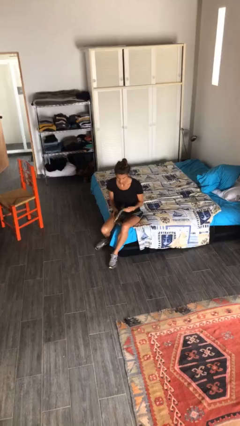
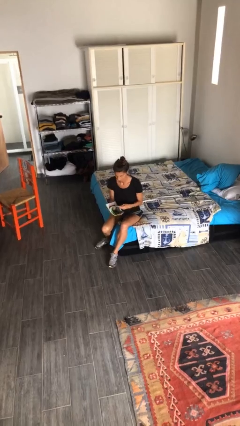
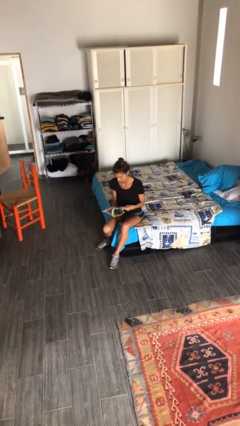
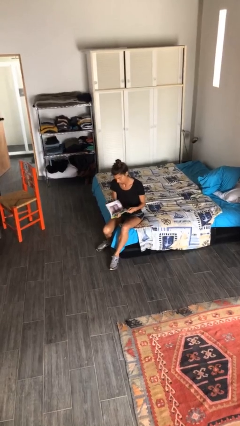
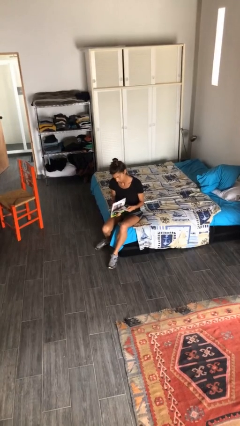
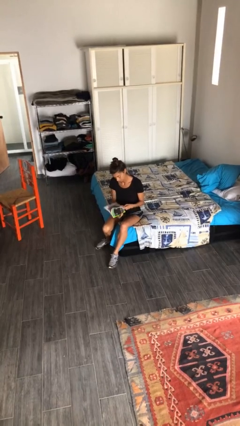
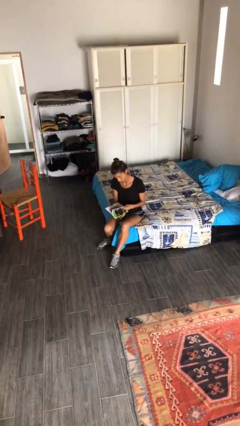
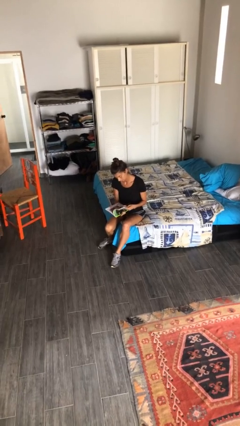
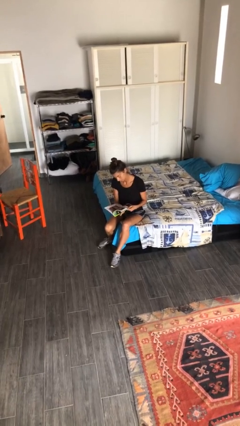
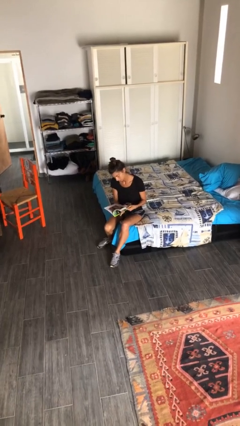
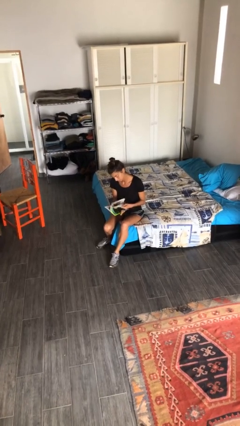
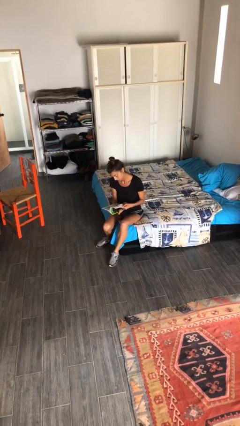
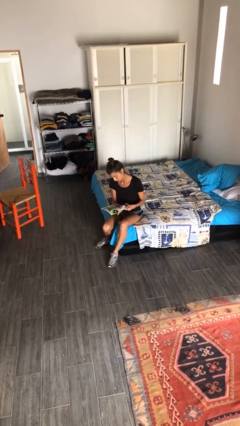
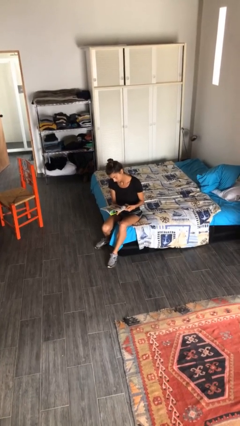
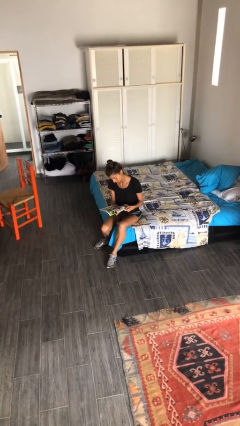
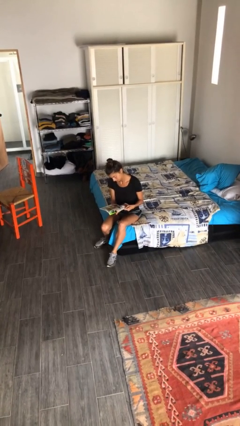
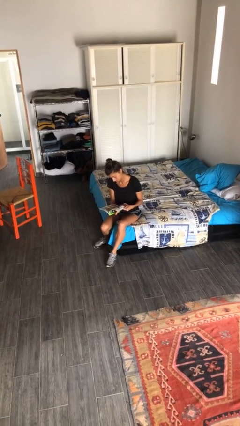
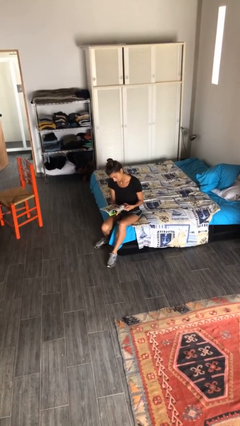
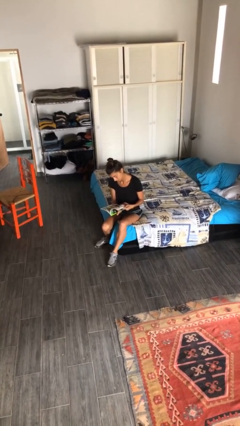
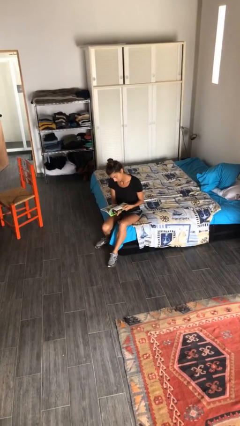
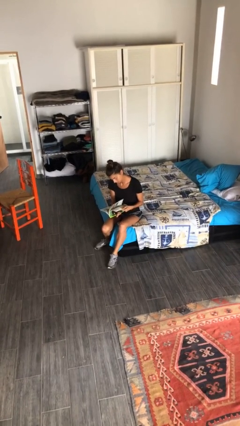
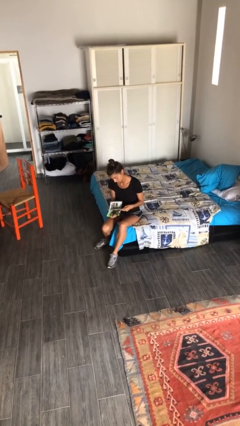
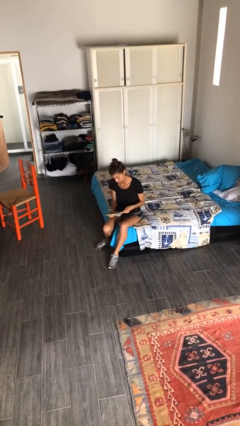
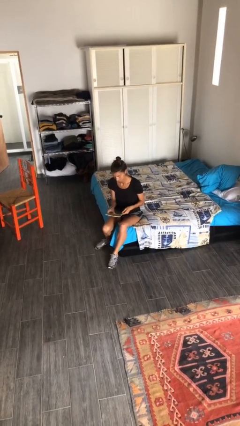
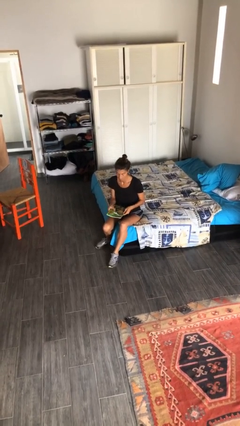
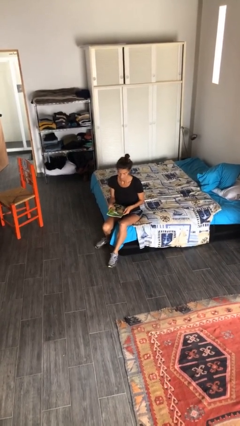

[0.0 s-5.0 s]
person reads magazine

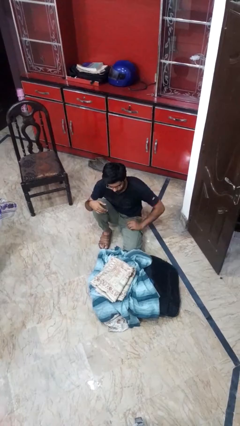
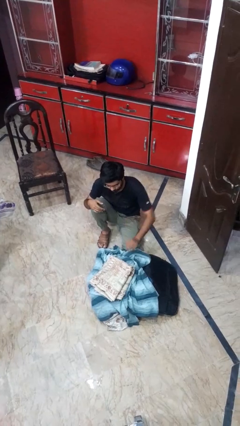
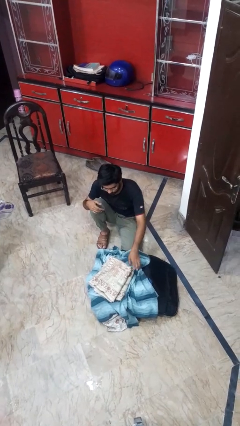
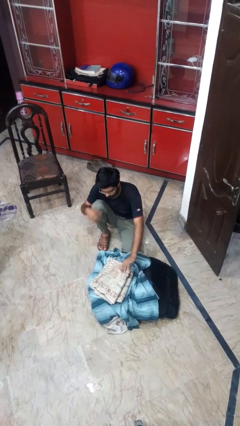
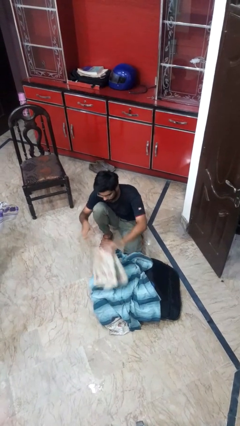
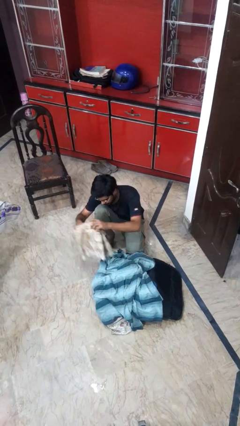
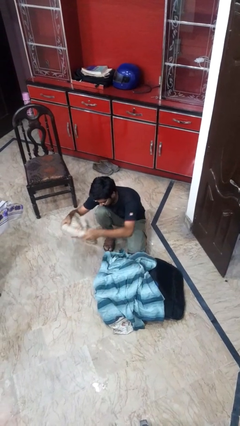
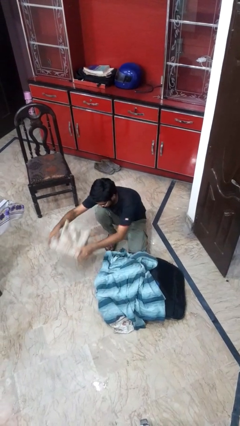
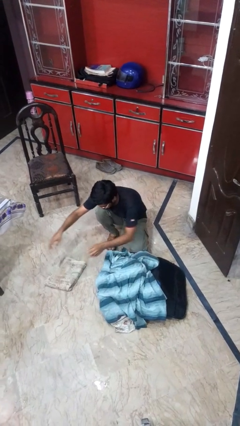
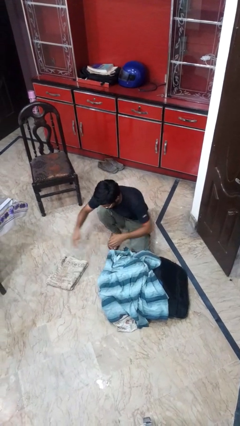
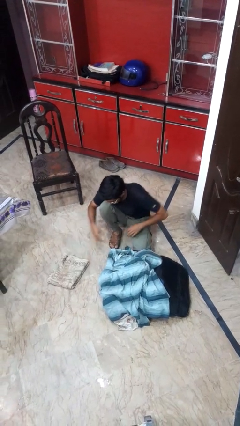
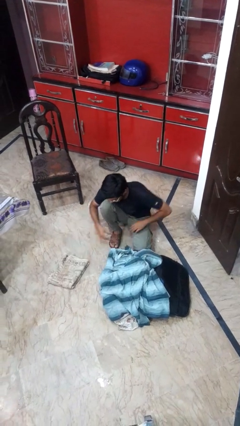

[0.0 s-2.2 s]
person unloads clothes from suitcase

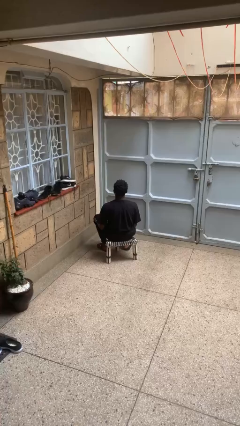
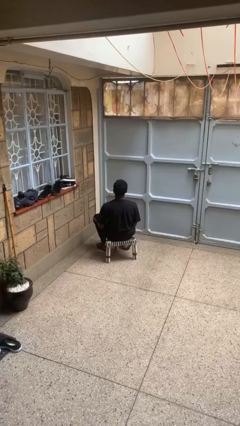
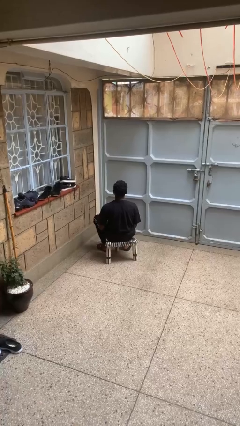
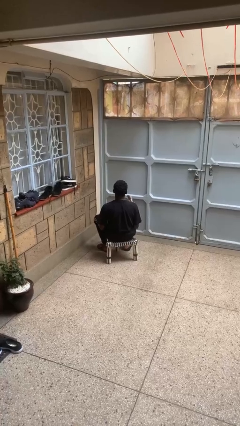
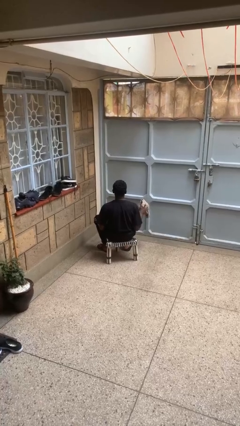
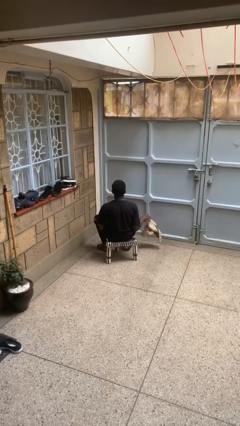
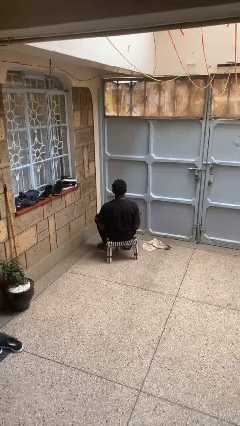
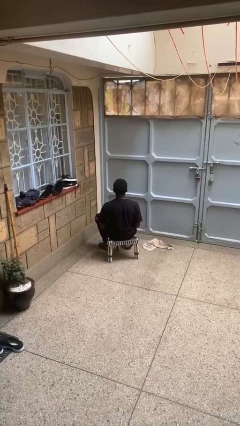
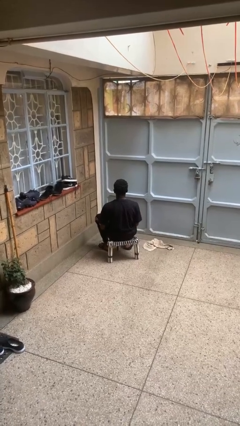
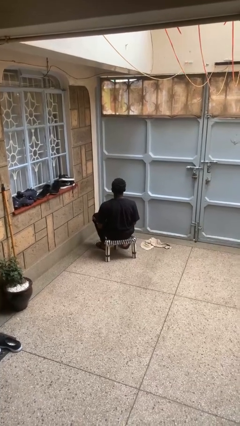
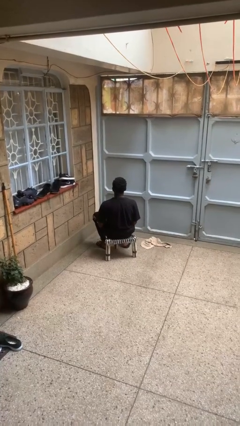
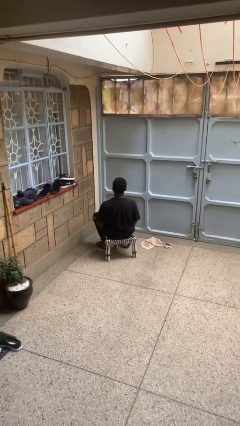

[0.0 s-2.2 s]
person throws object to ground

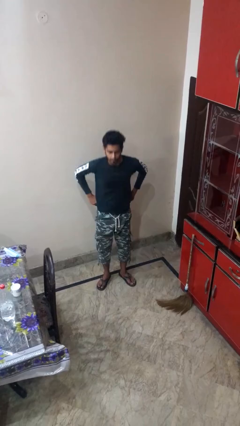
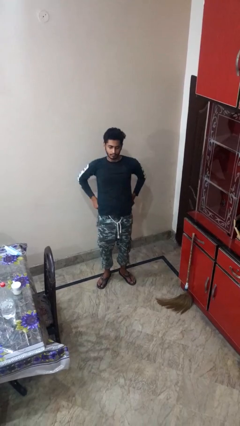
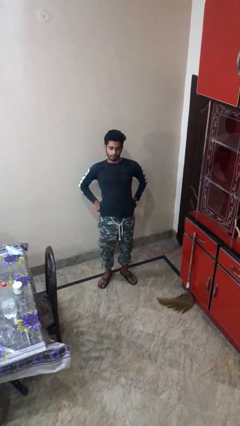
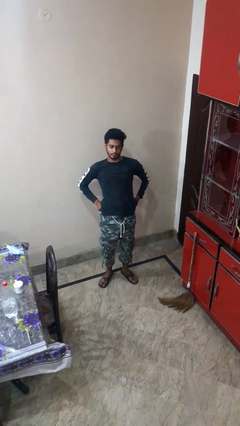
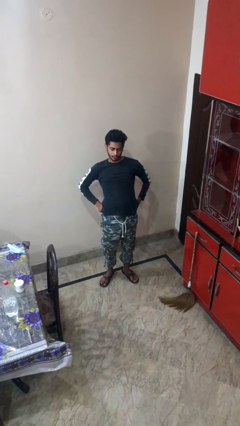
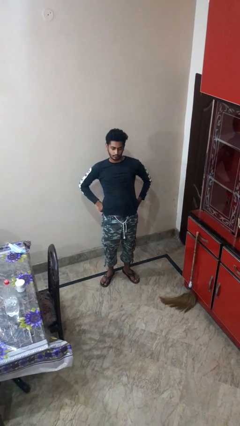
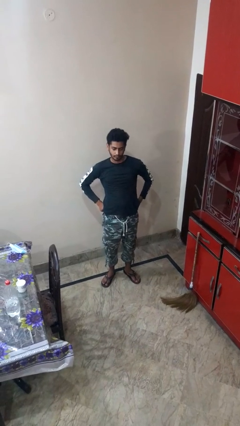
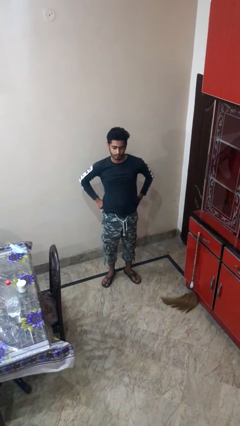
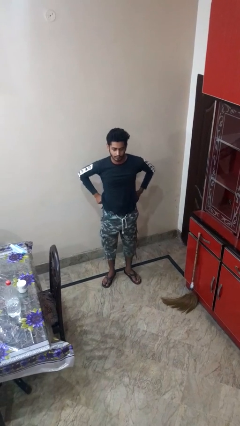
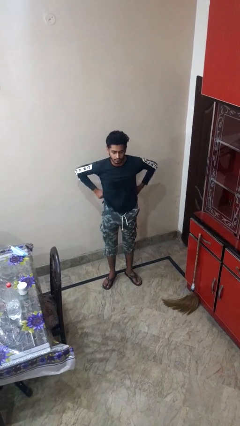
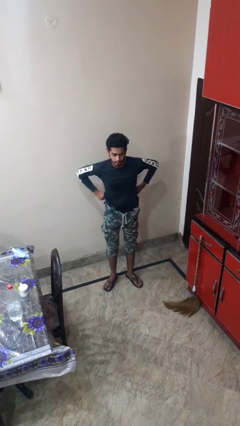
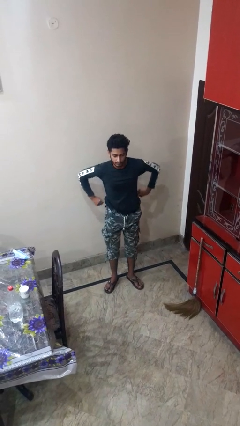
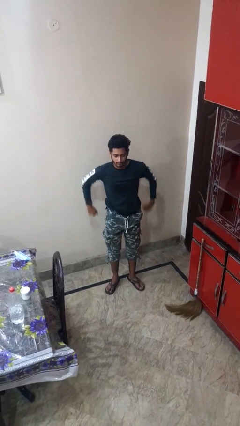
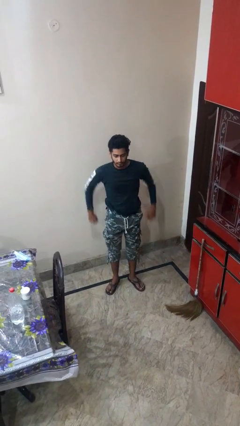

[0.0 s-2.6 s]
person stretches back

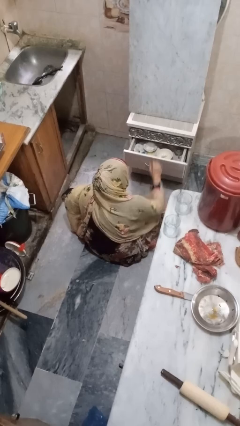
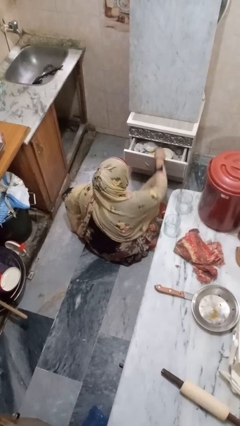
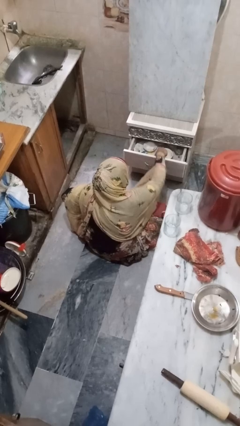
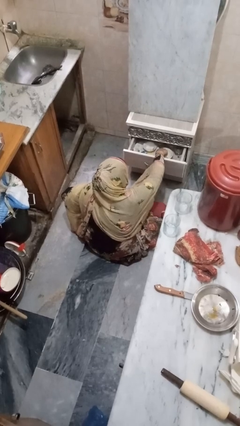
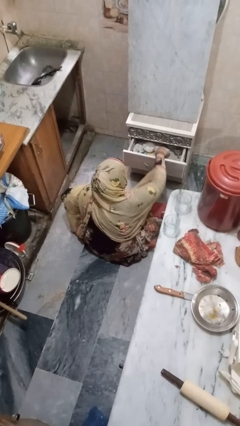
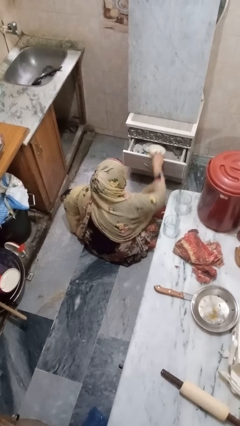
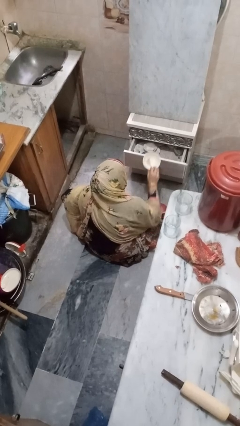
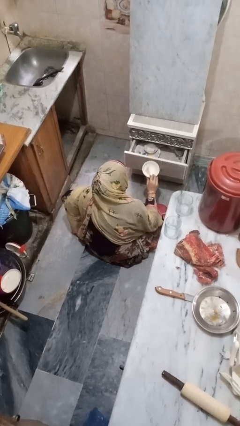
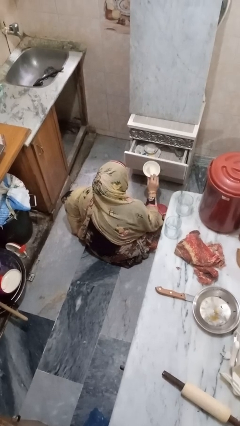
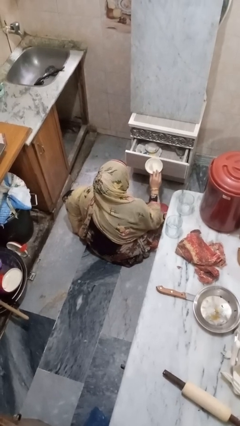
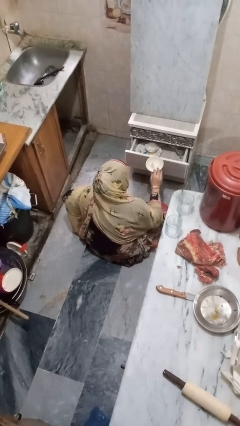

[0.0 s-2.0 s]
person takes object from kitchen drawer

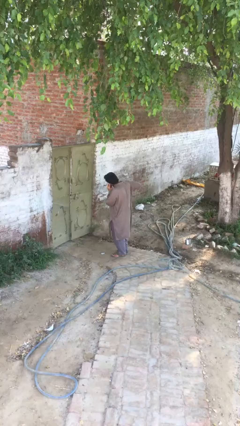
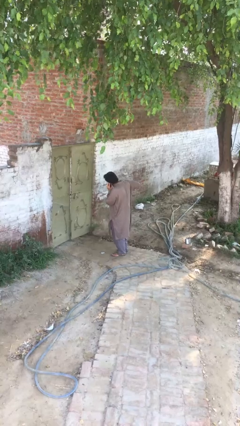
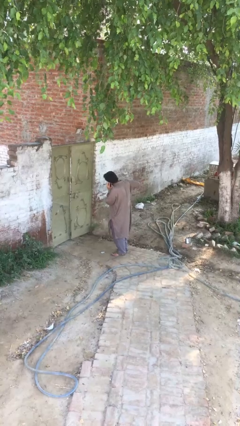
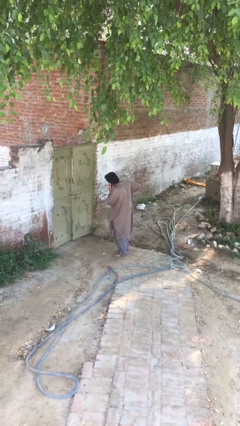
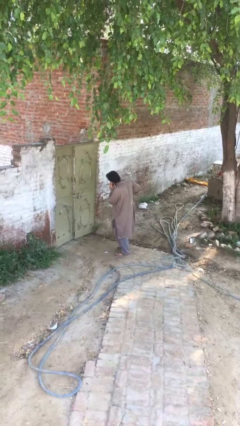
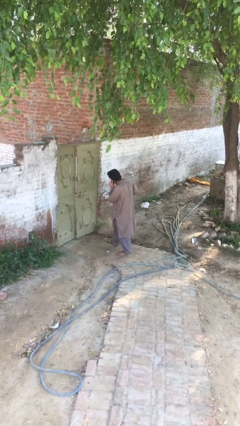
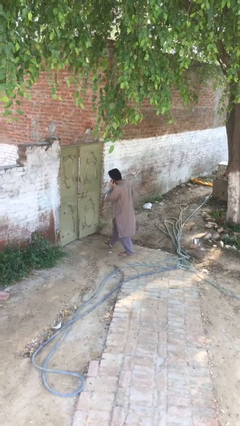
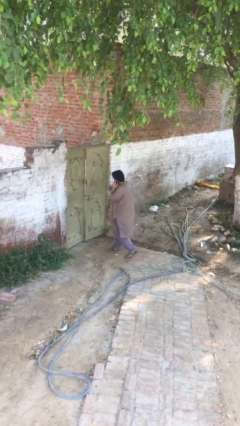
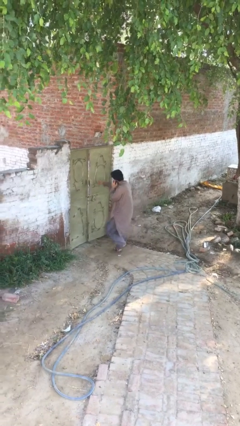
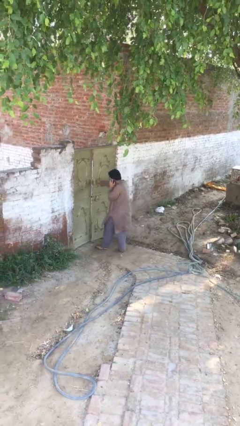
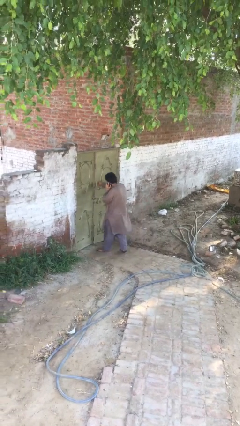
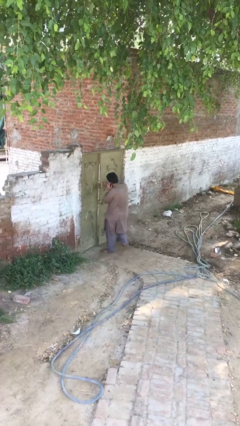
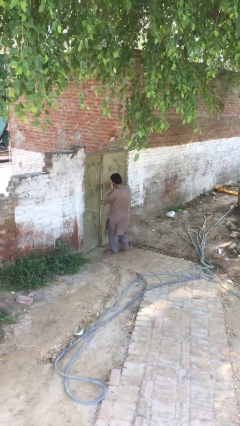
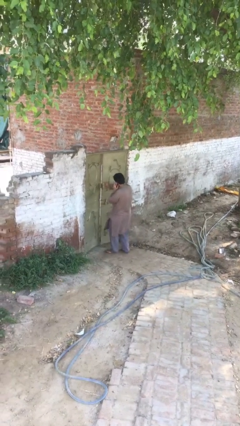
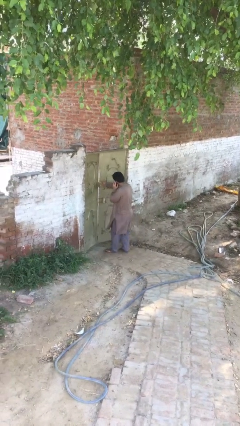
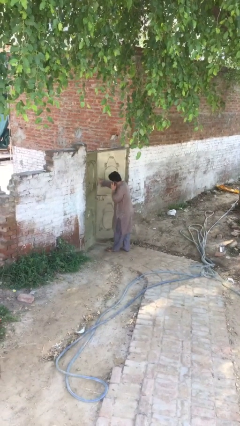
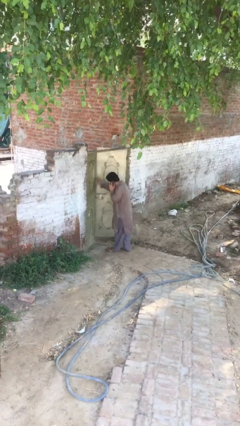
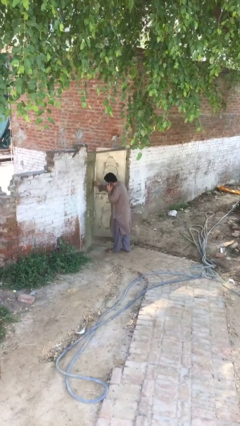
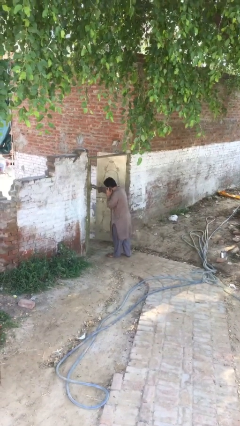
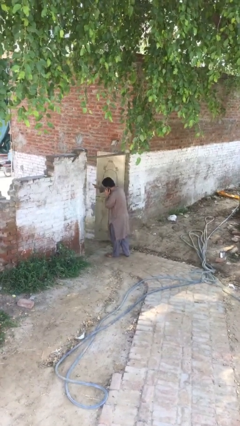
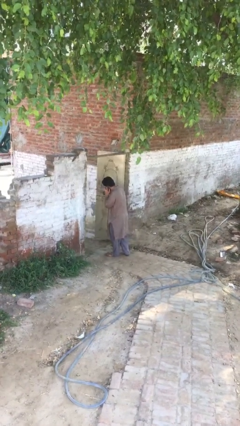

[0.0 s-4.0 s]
person opens facility door
